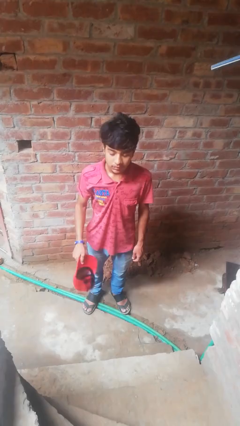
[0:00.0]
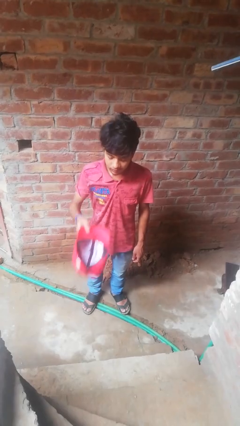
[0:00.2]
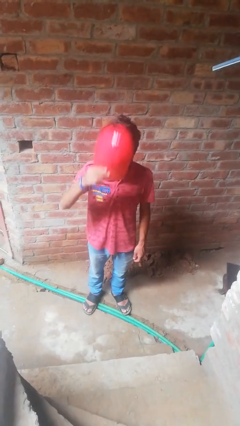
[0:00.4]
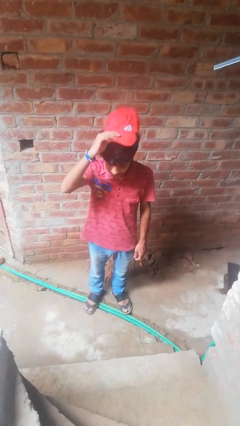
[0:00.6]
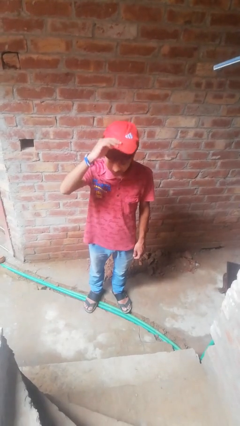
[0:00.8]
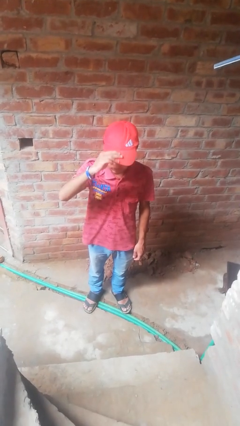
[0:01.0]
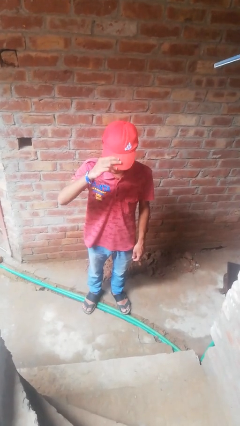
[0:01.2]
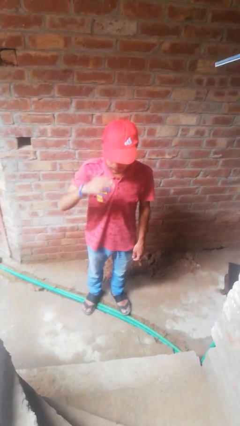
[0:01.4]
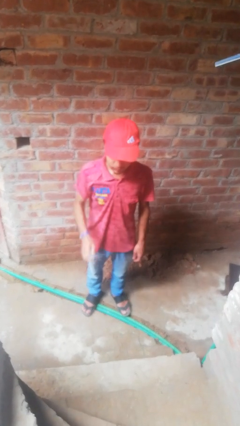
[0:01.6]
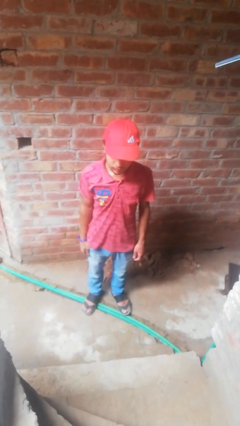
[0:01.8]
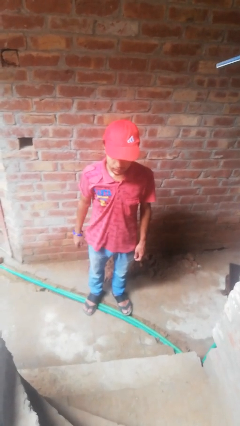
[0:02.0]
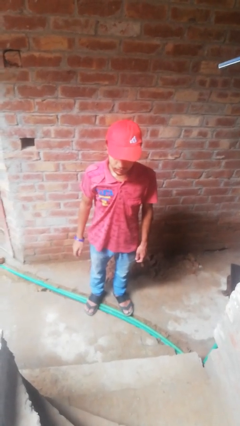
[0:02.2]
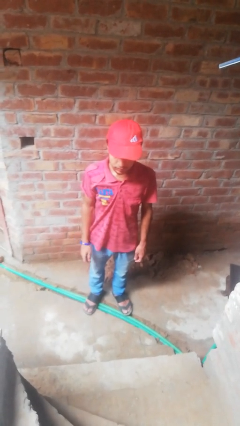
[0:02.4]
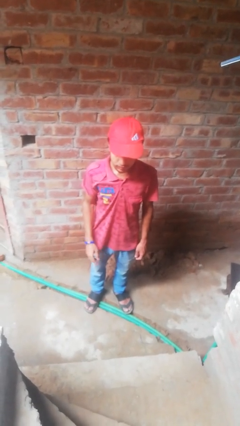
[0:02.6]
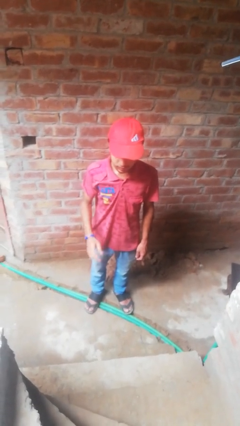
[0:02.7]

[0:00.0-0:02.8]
person puts on hat

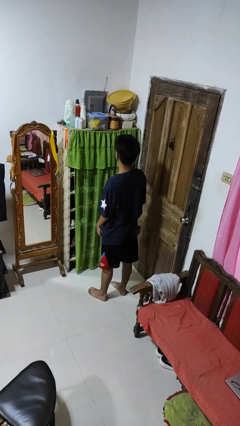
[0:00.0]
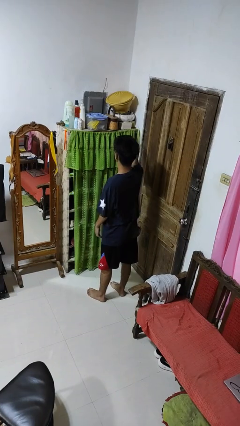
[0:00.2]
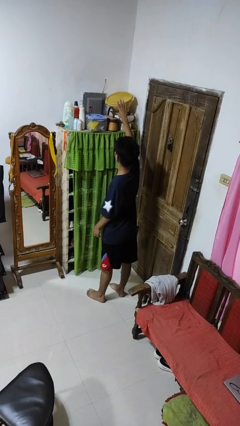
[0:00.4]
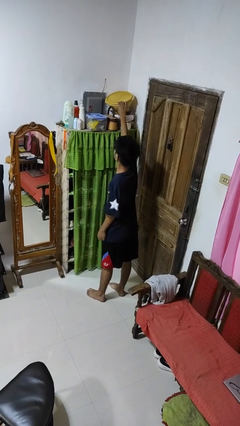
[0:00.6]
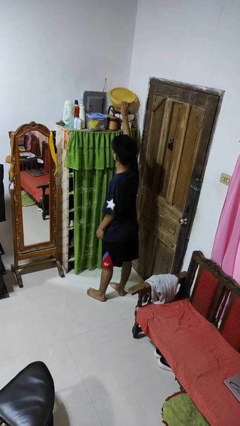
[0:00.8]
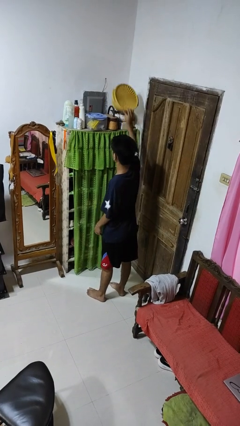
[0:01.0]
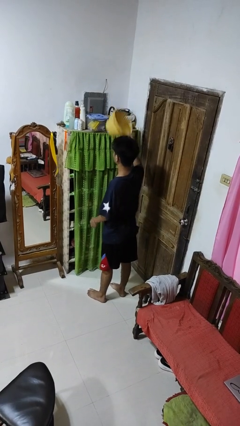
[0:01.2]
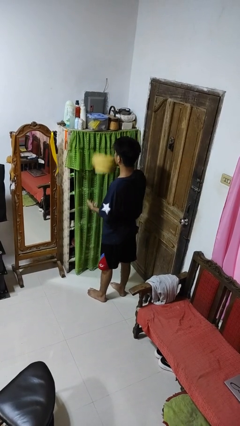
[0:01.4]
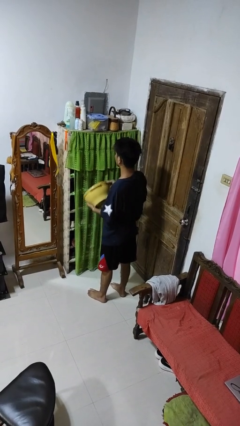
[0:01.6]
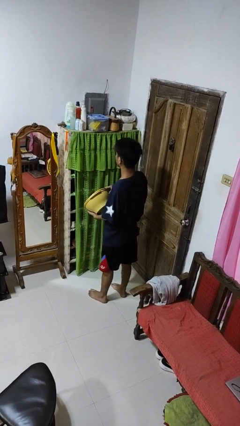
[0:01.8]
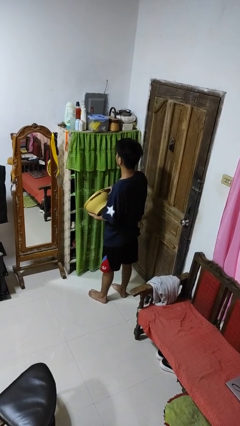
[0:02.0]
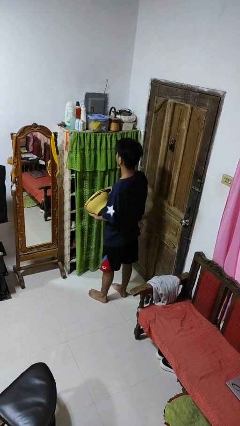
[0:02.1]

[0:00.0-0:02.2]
person picks up object from shelf

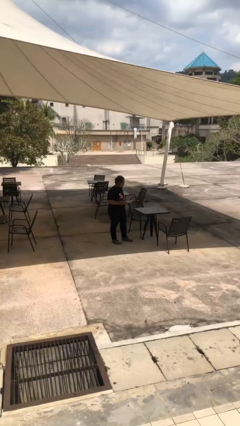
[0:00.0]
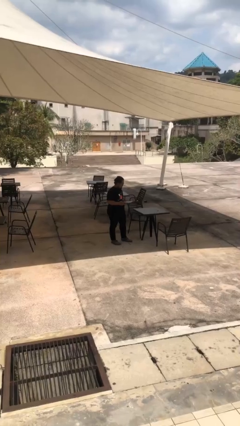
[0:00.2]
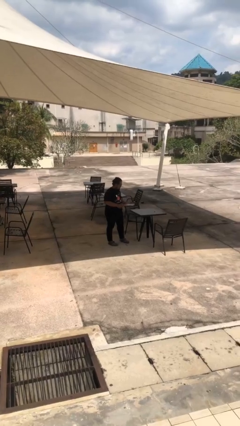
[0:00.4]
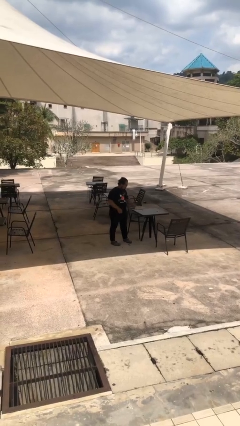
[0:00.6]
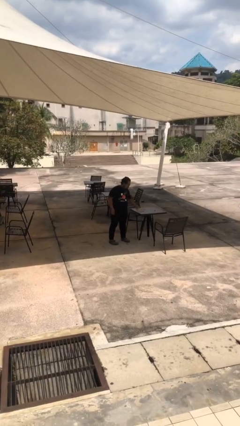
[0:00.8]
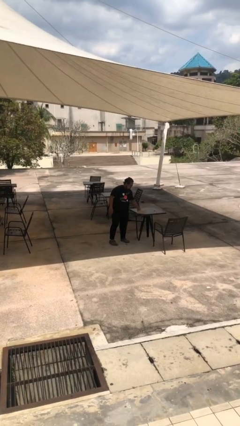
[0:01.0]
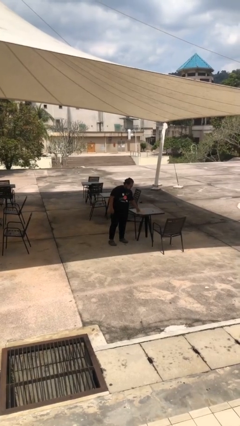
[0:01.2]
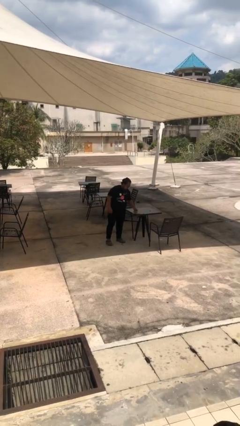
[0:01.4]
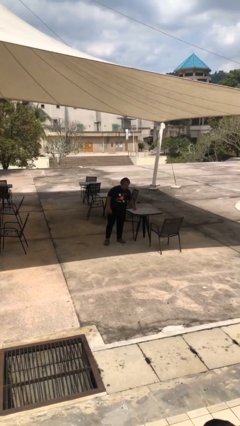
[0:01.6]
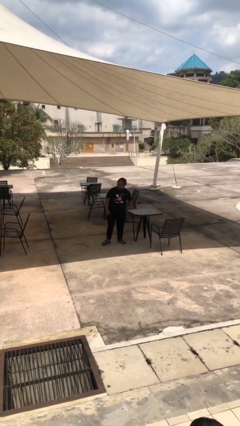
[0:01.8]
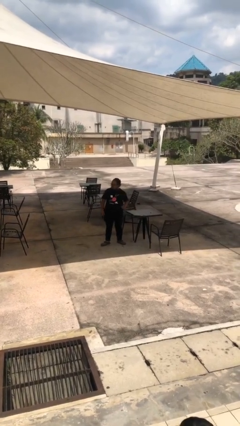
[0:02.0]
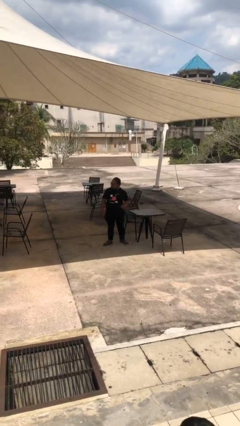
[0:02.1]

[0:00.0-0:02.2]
person puts down object on table

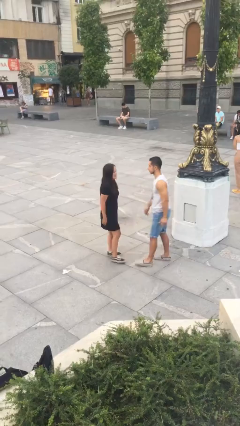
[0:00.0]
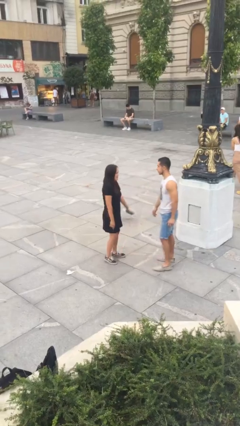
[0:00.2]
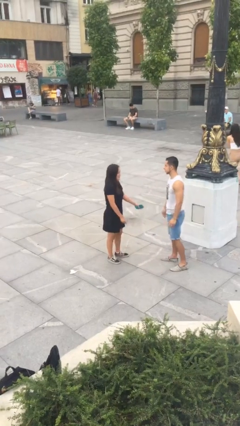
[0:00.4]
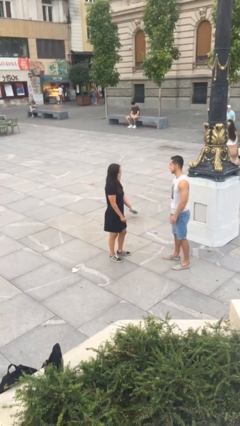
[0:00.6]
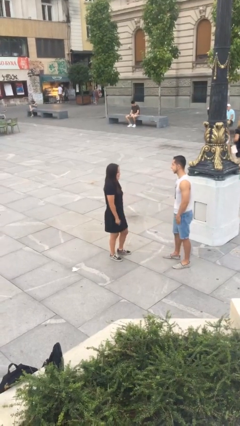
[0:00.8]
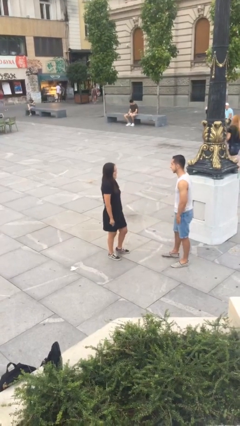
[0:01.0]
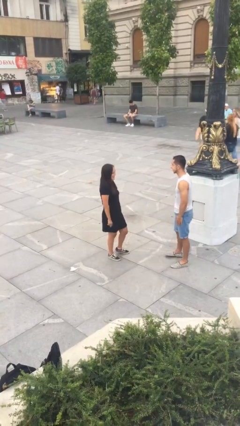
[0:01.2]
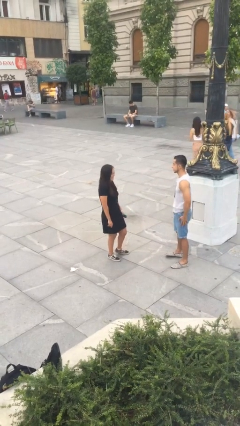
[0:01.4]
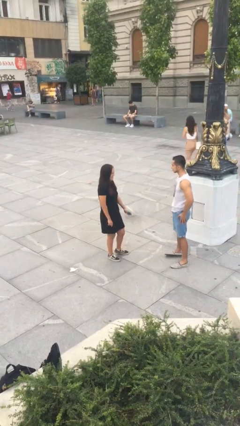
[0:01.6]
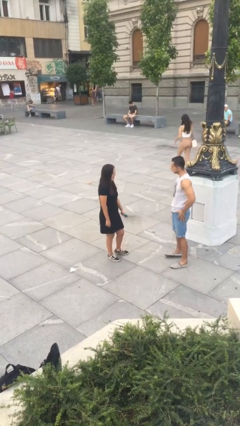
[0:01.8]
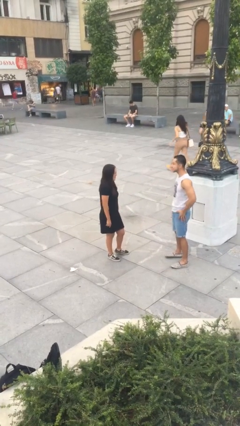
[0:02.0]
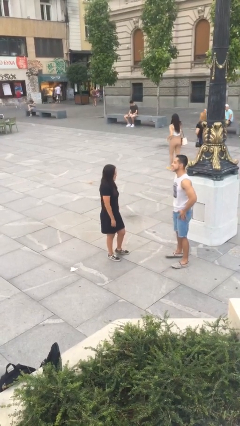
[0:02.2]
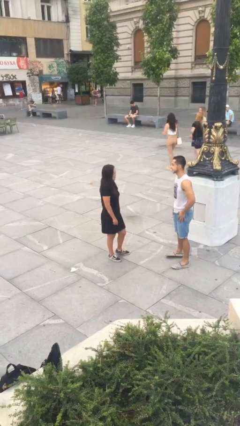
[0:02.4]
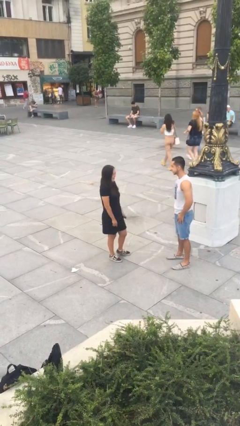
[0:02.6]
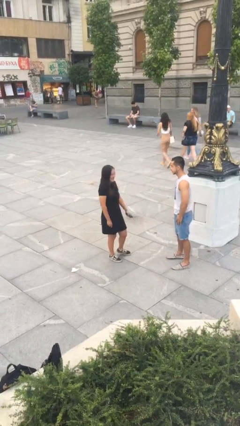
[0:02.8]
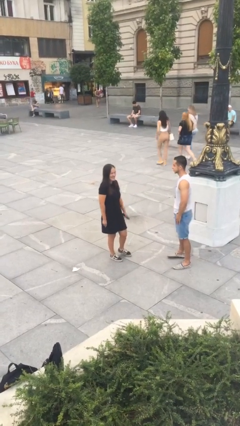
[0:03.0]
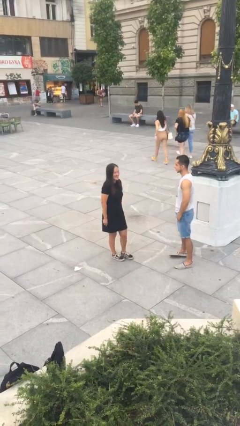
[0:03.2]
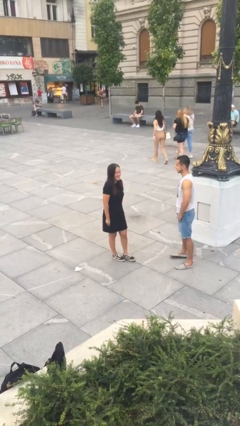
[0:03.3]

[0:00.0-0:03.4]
person talks to person

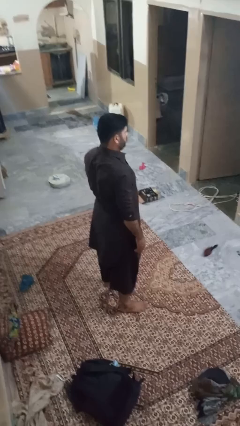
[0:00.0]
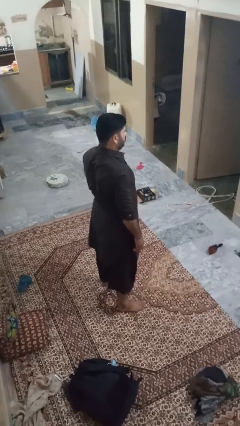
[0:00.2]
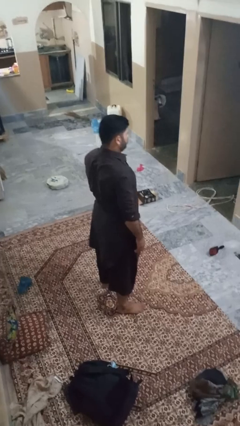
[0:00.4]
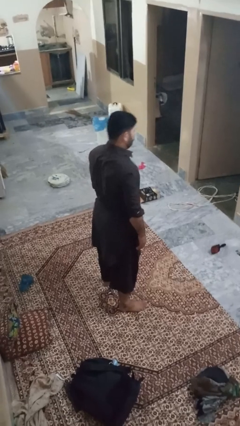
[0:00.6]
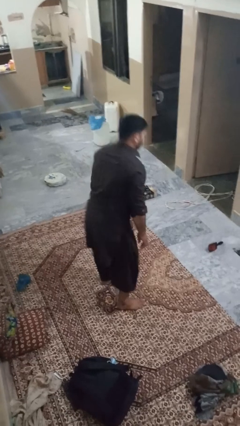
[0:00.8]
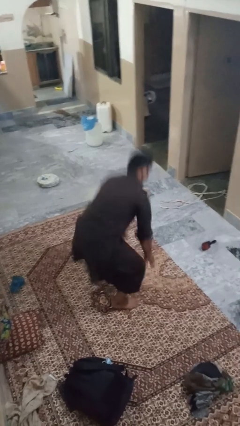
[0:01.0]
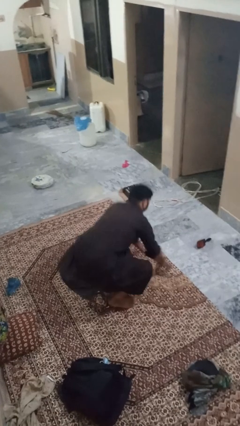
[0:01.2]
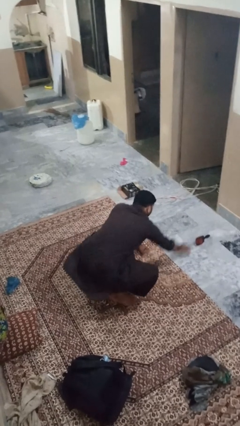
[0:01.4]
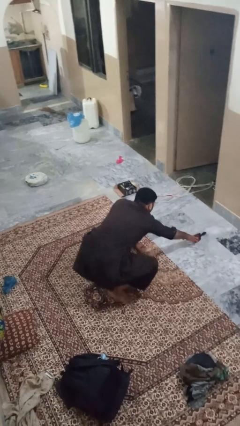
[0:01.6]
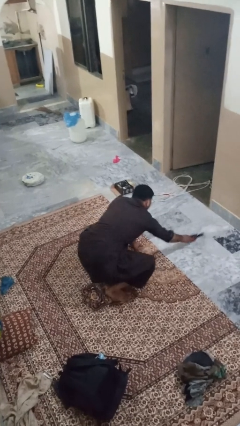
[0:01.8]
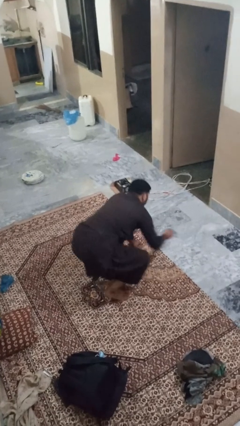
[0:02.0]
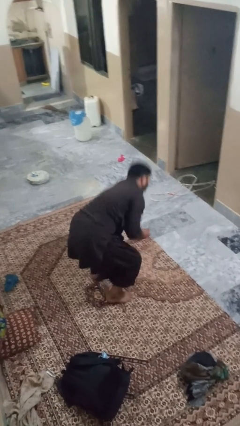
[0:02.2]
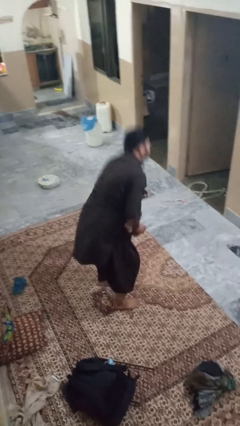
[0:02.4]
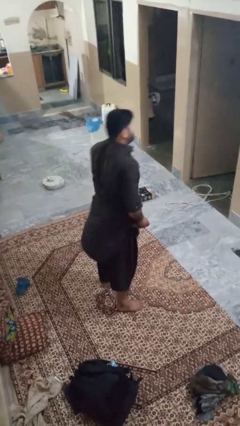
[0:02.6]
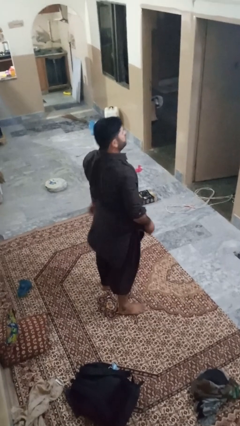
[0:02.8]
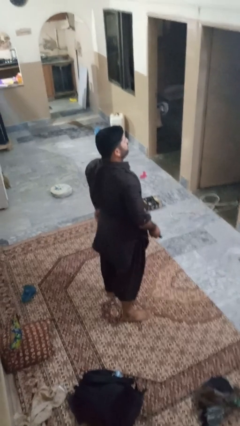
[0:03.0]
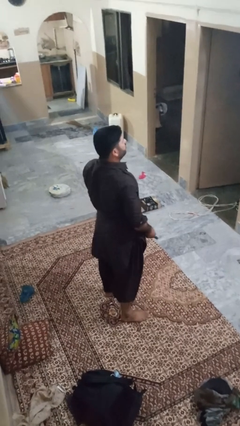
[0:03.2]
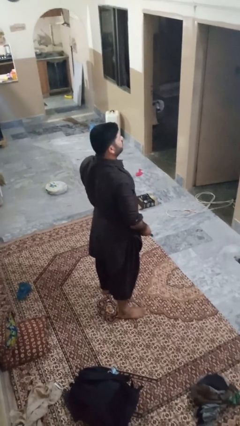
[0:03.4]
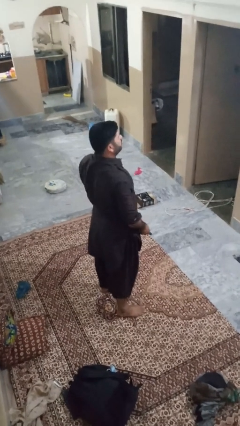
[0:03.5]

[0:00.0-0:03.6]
person picks up object from floor

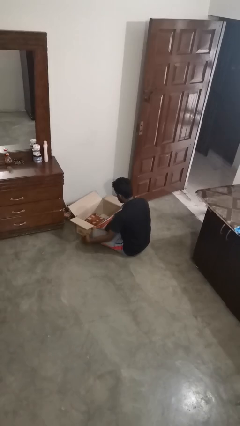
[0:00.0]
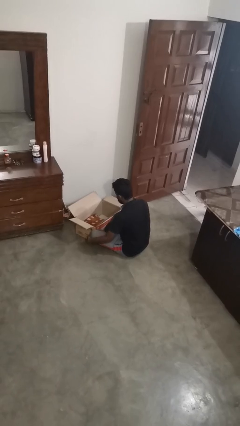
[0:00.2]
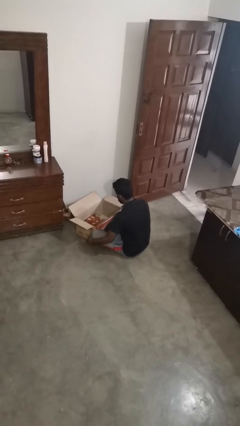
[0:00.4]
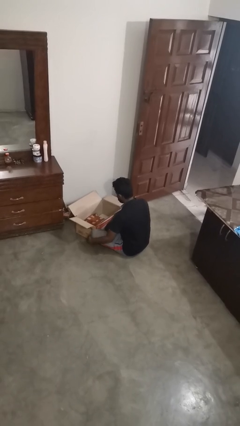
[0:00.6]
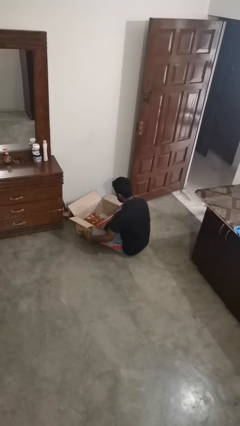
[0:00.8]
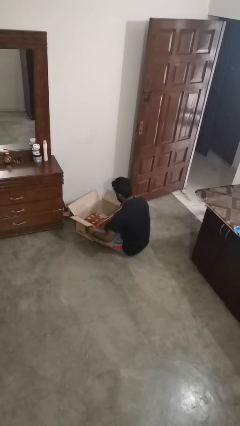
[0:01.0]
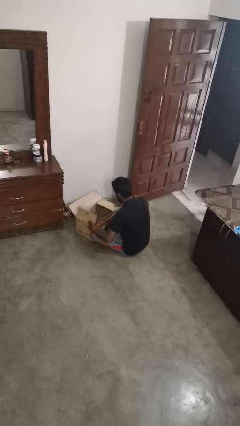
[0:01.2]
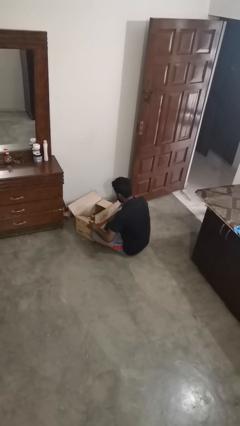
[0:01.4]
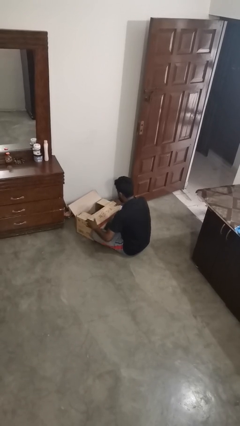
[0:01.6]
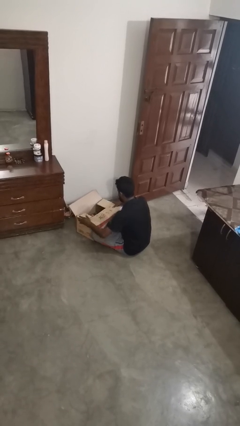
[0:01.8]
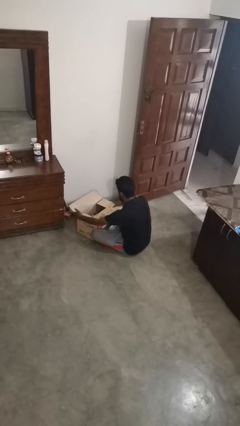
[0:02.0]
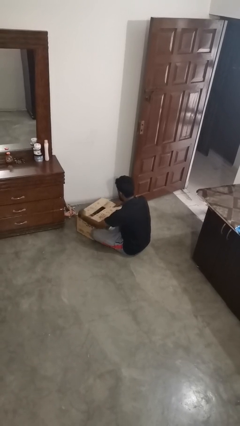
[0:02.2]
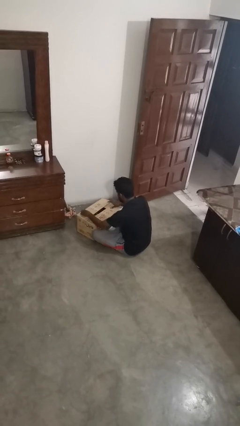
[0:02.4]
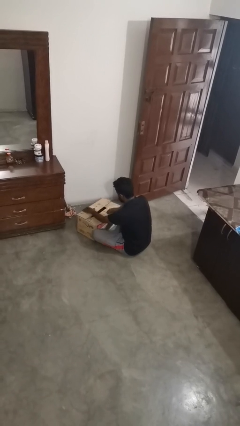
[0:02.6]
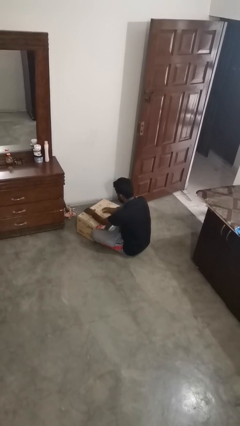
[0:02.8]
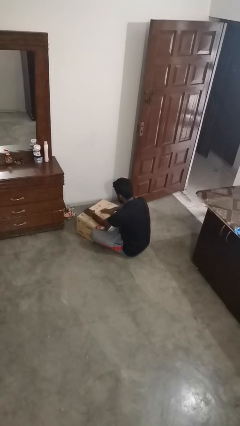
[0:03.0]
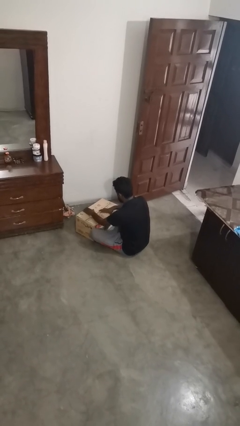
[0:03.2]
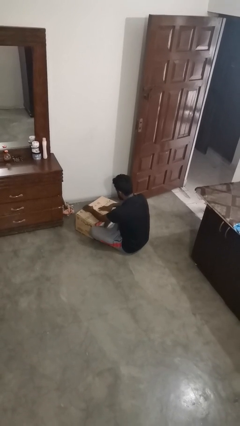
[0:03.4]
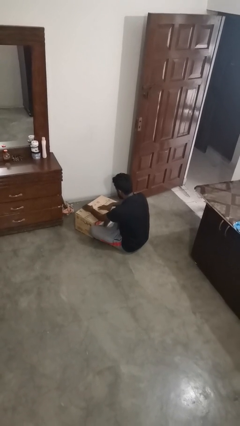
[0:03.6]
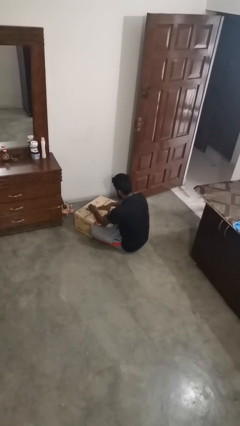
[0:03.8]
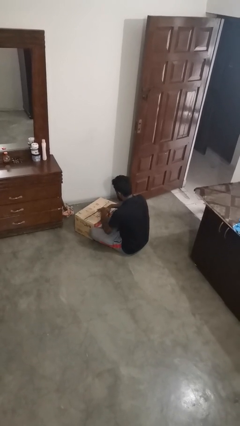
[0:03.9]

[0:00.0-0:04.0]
person closes box
